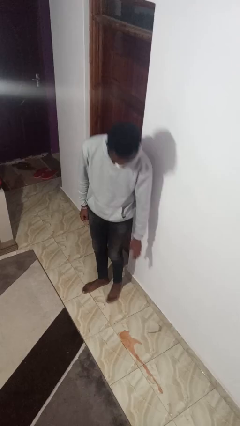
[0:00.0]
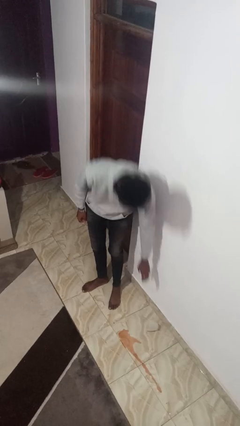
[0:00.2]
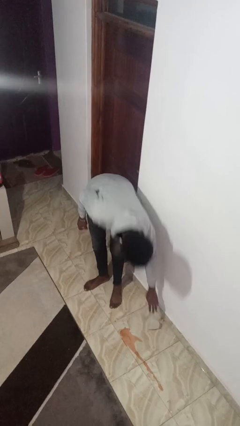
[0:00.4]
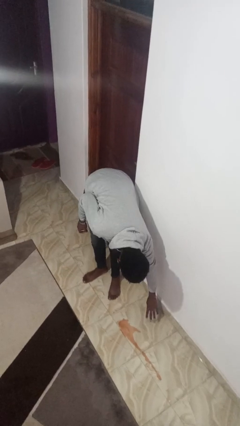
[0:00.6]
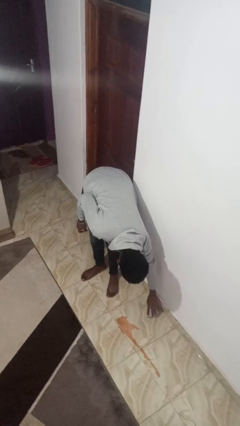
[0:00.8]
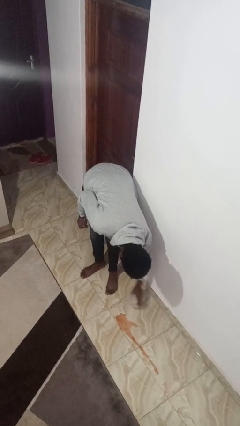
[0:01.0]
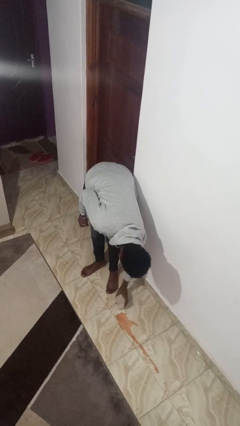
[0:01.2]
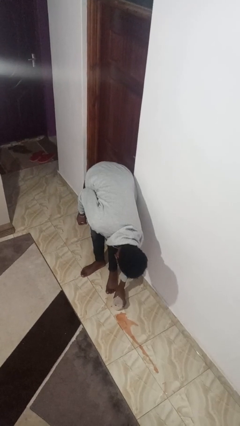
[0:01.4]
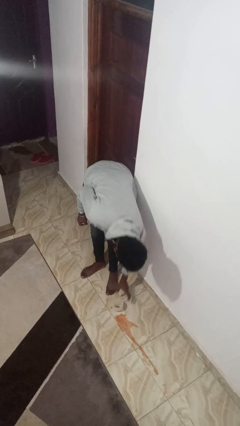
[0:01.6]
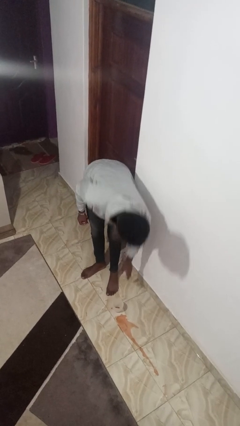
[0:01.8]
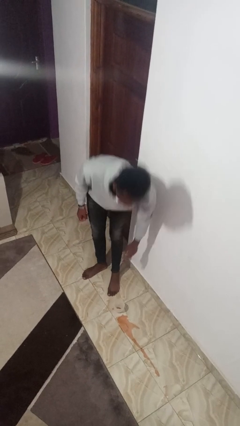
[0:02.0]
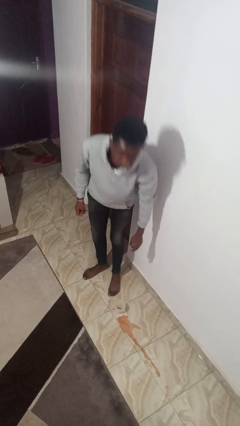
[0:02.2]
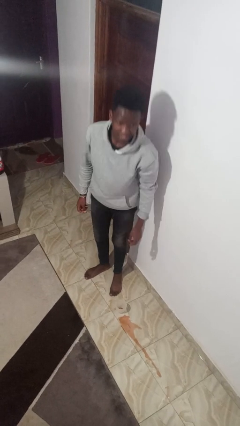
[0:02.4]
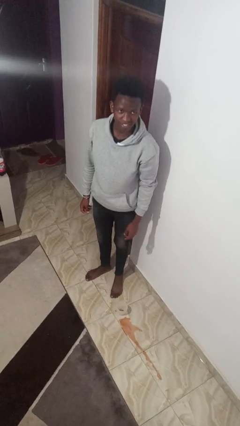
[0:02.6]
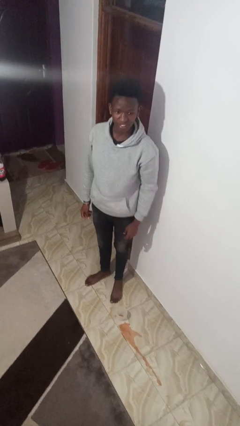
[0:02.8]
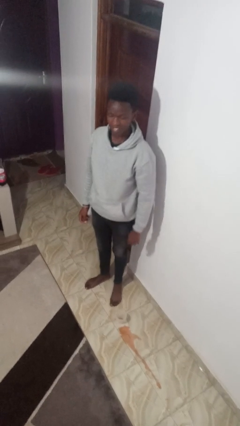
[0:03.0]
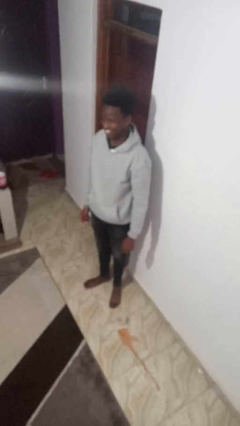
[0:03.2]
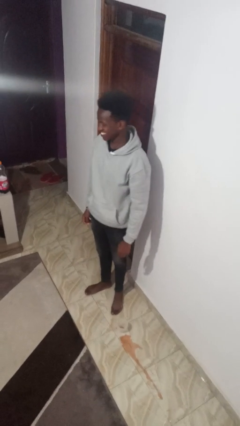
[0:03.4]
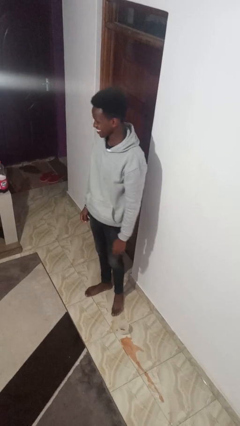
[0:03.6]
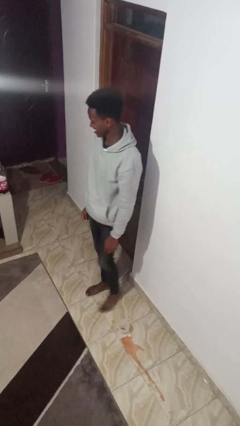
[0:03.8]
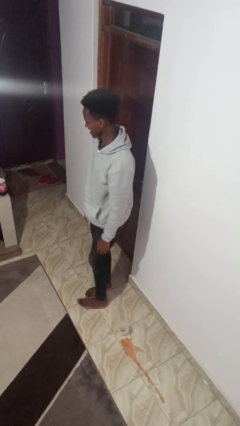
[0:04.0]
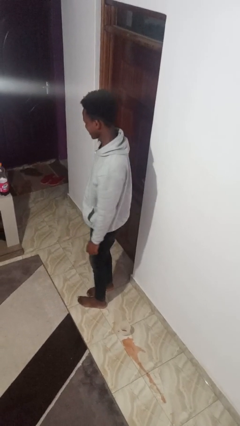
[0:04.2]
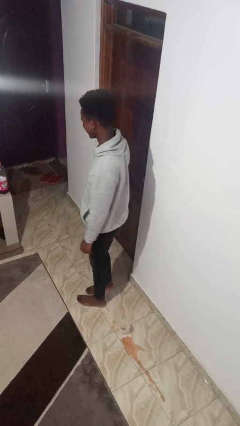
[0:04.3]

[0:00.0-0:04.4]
person sets upright glass

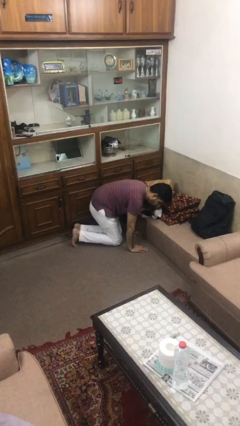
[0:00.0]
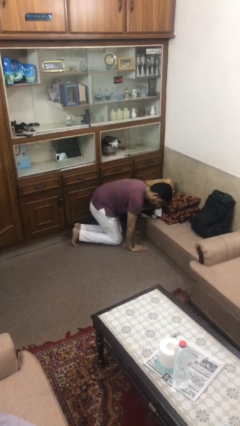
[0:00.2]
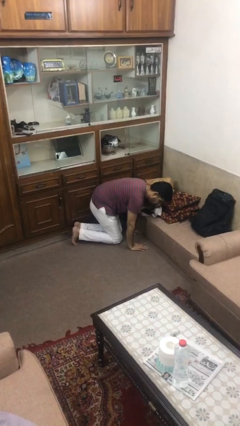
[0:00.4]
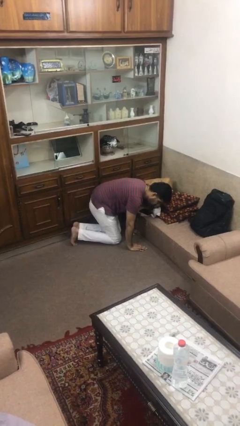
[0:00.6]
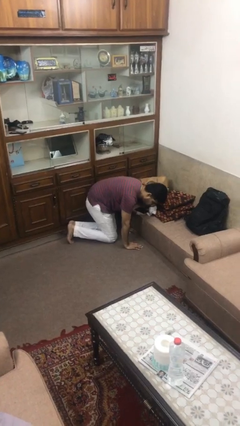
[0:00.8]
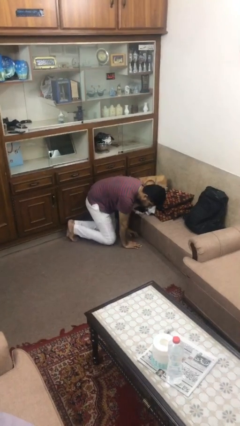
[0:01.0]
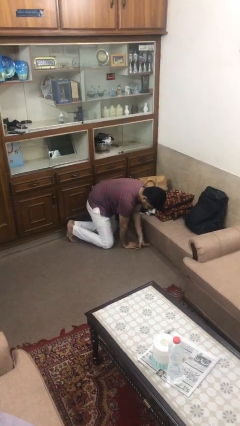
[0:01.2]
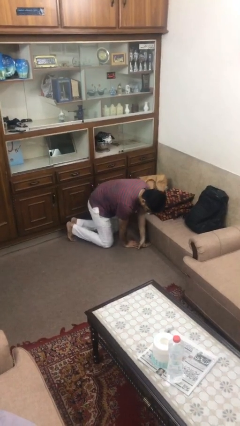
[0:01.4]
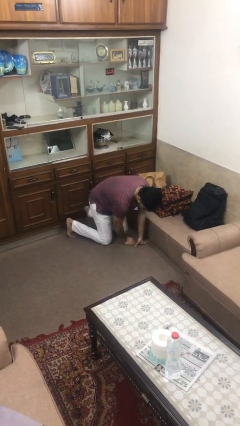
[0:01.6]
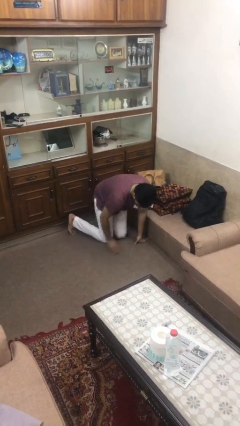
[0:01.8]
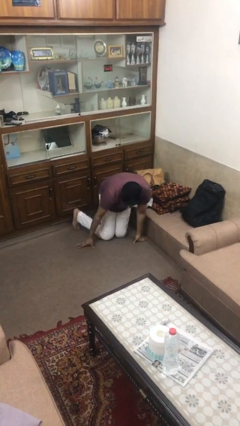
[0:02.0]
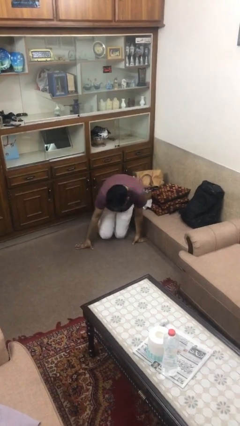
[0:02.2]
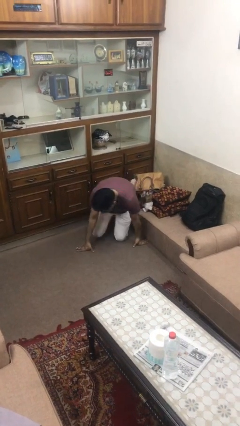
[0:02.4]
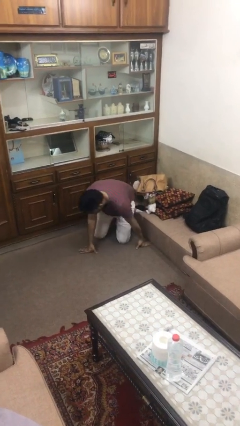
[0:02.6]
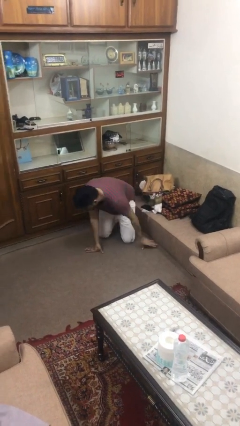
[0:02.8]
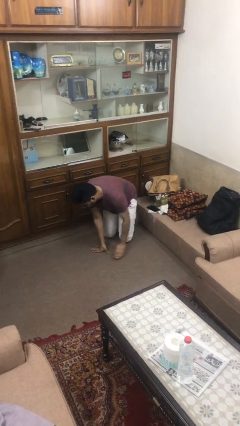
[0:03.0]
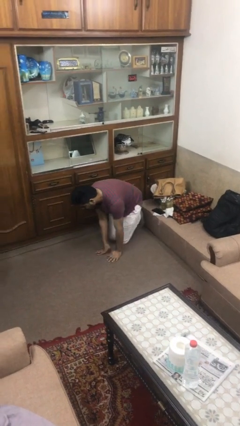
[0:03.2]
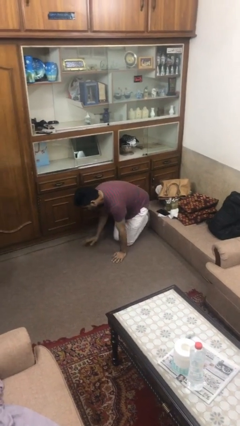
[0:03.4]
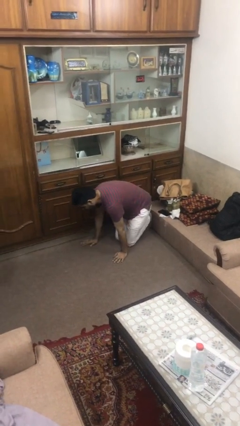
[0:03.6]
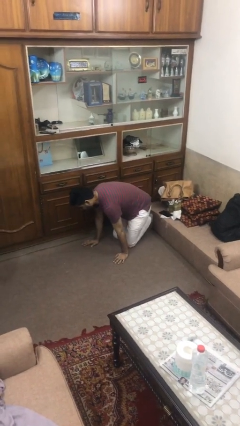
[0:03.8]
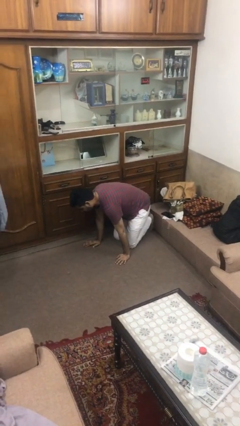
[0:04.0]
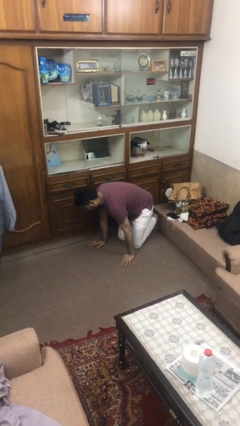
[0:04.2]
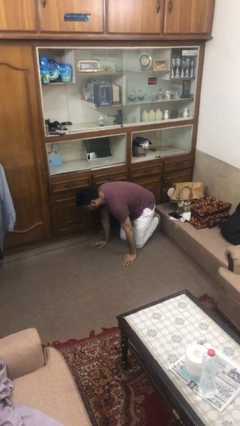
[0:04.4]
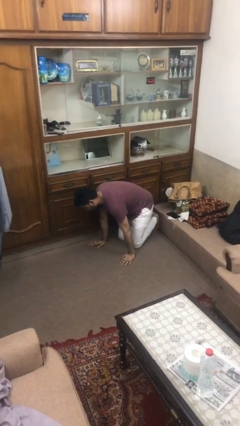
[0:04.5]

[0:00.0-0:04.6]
person crawls

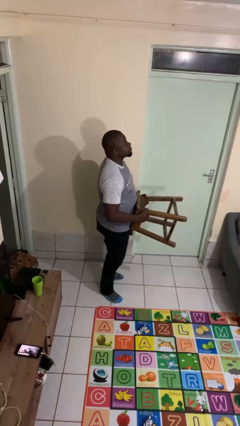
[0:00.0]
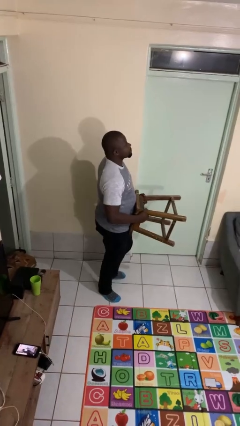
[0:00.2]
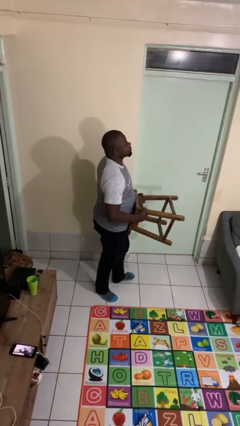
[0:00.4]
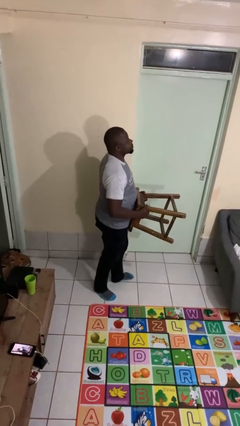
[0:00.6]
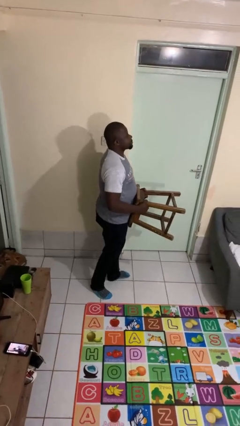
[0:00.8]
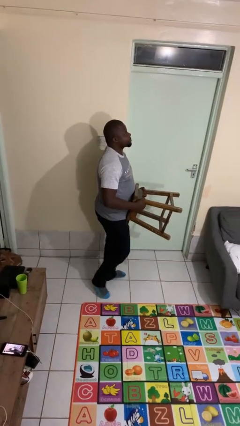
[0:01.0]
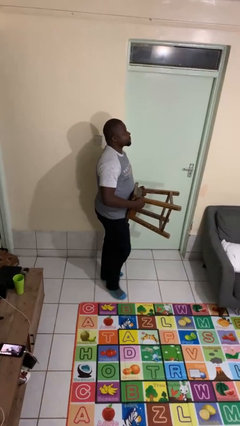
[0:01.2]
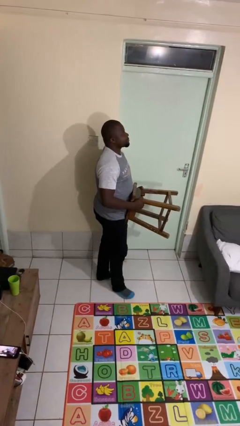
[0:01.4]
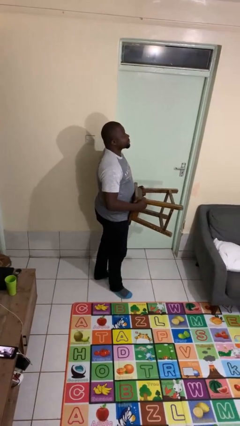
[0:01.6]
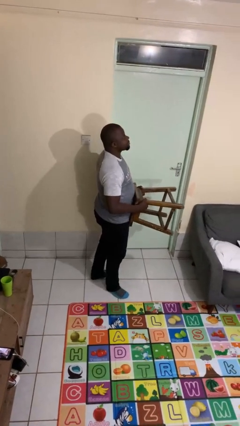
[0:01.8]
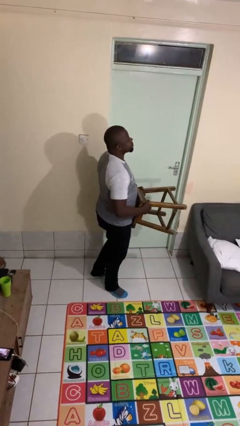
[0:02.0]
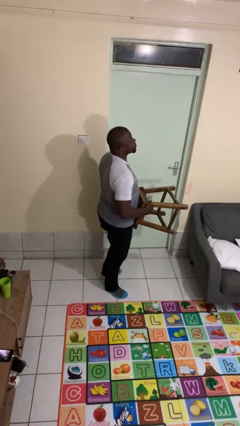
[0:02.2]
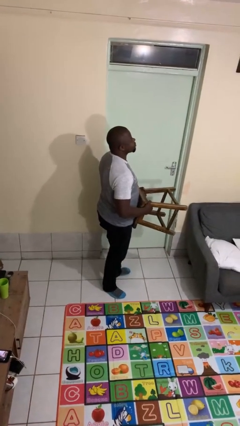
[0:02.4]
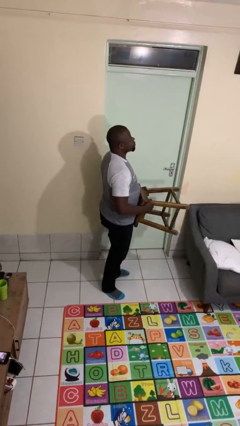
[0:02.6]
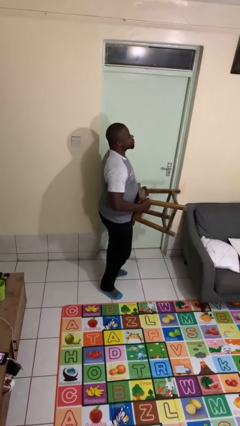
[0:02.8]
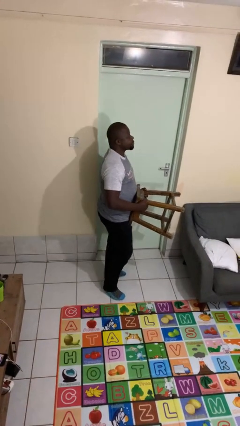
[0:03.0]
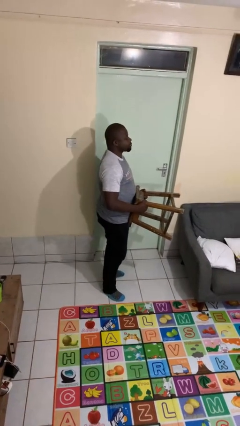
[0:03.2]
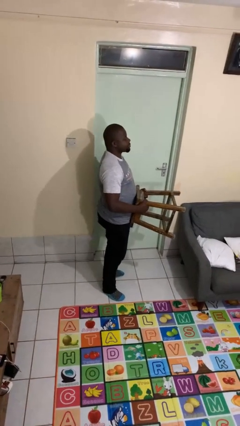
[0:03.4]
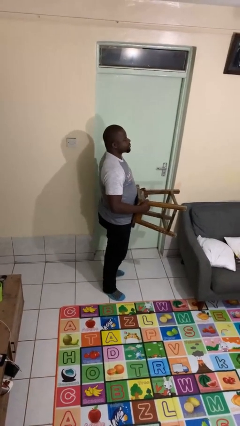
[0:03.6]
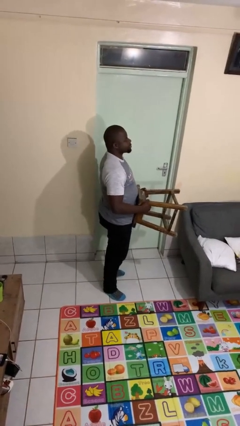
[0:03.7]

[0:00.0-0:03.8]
person carries furniture

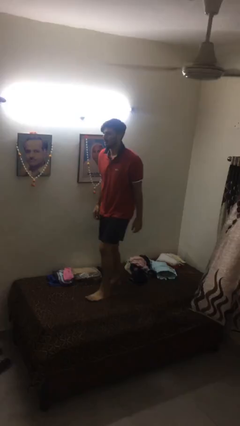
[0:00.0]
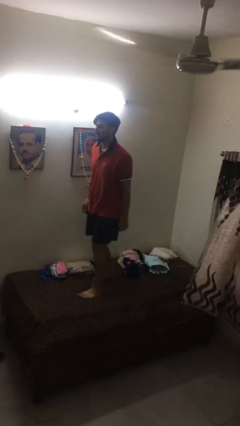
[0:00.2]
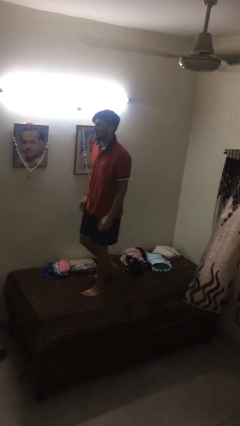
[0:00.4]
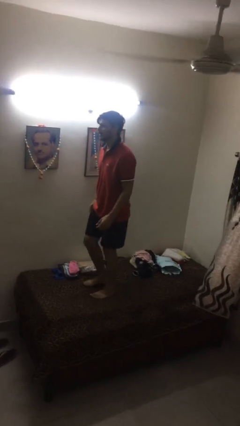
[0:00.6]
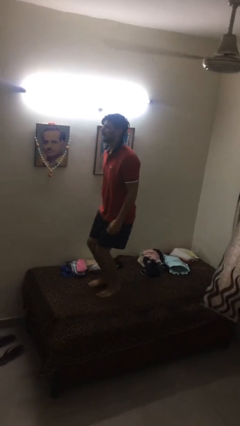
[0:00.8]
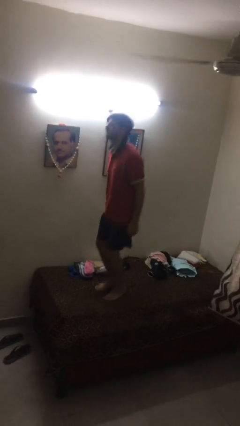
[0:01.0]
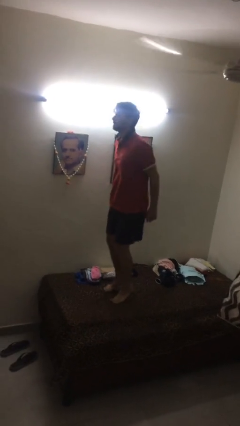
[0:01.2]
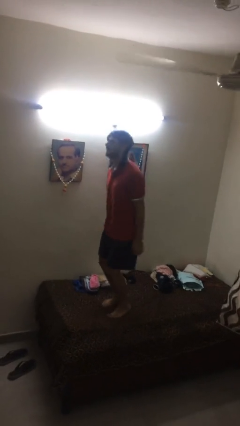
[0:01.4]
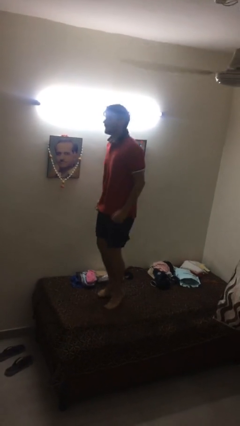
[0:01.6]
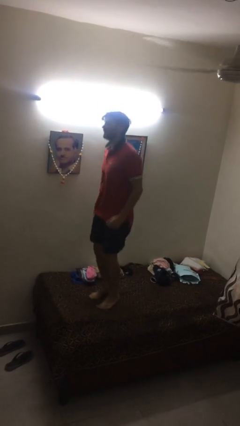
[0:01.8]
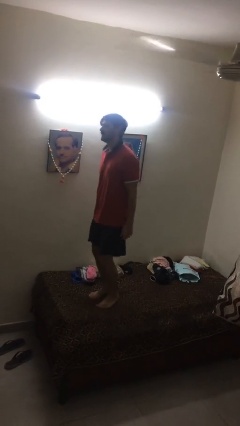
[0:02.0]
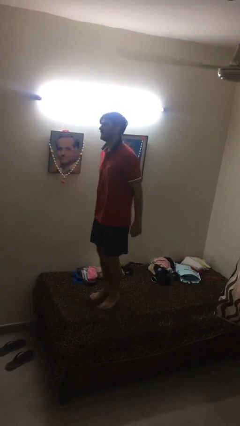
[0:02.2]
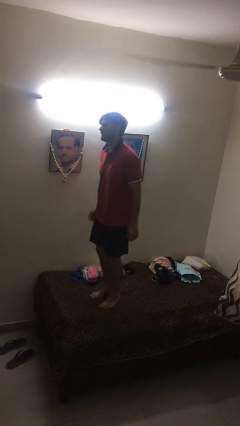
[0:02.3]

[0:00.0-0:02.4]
person jumps on bed

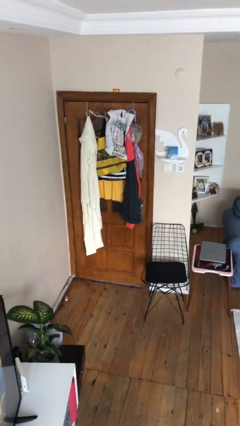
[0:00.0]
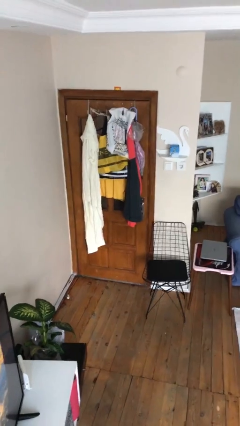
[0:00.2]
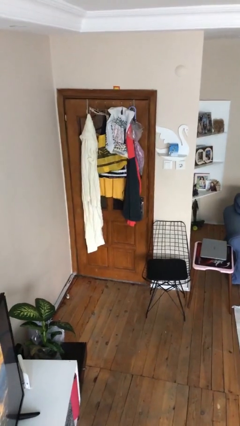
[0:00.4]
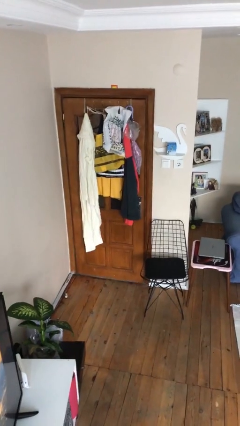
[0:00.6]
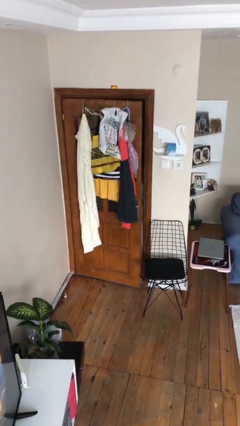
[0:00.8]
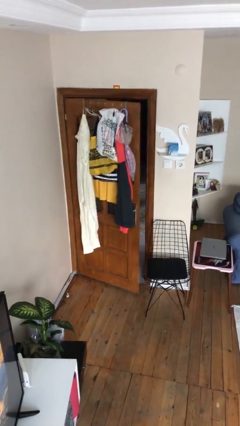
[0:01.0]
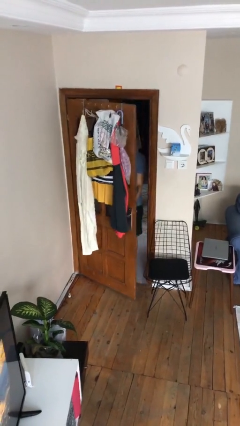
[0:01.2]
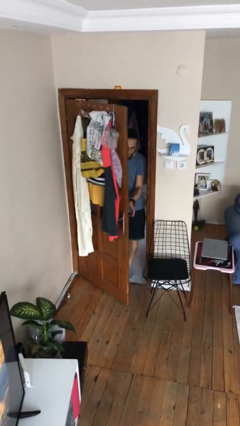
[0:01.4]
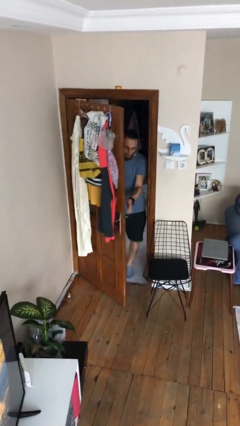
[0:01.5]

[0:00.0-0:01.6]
person opens facility door

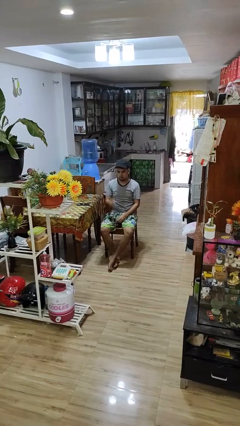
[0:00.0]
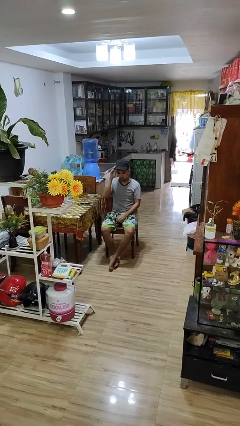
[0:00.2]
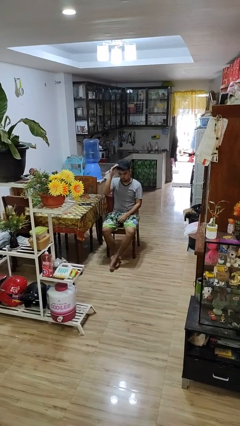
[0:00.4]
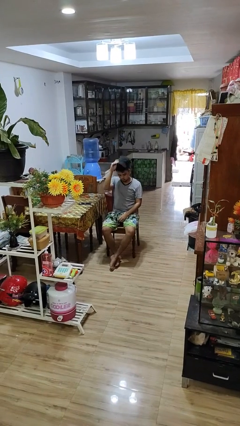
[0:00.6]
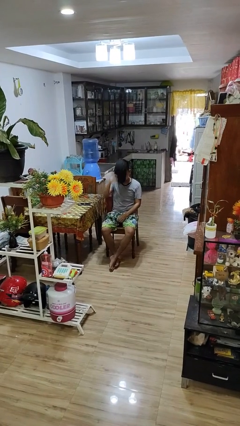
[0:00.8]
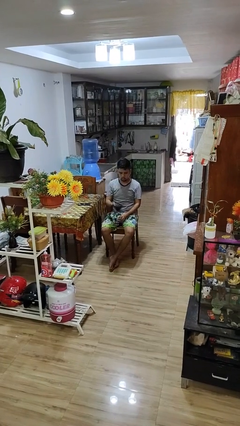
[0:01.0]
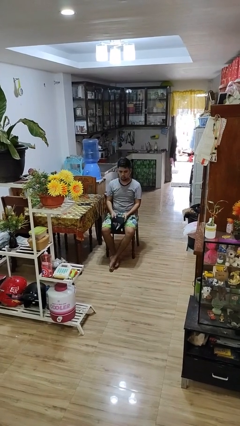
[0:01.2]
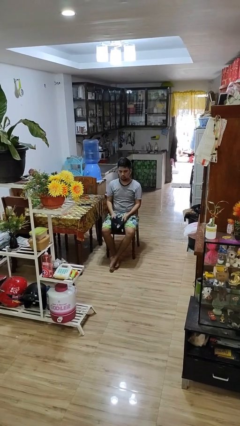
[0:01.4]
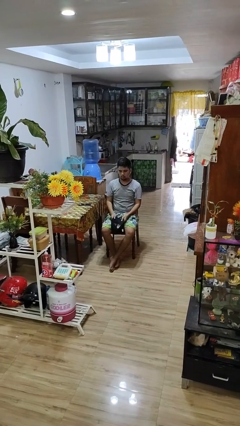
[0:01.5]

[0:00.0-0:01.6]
person takes off hat
